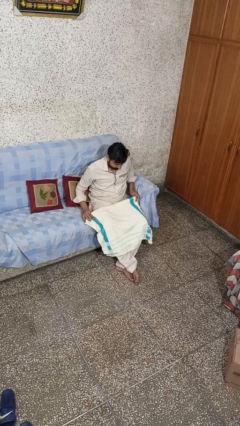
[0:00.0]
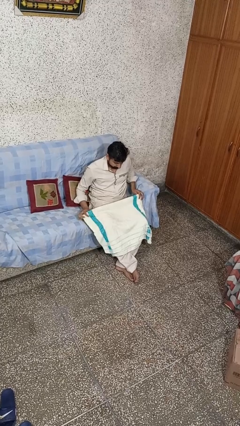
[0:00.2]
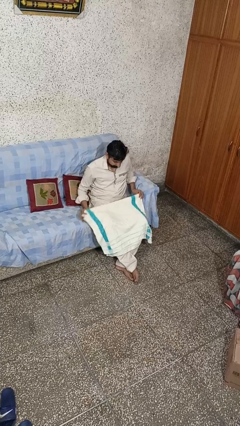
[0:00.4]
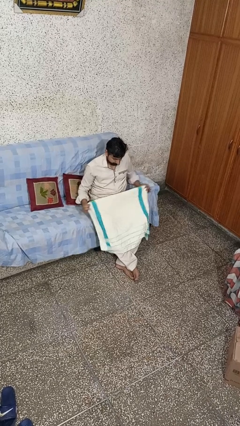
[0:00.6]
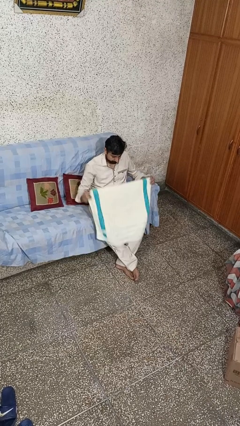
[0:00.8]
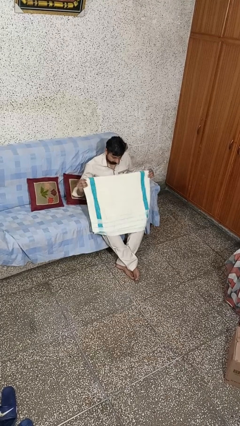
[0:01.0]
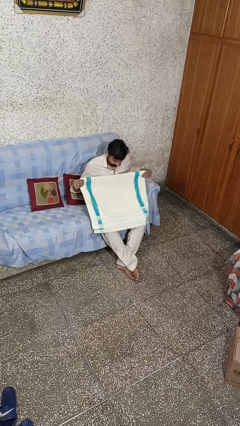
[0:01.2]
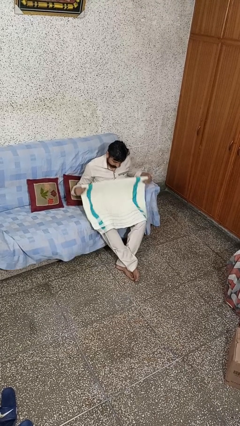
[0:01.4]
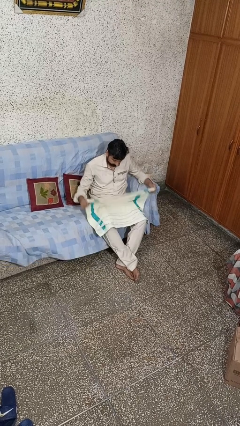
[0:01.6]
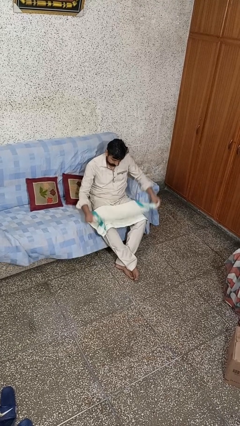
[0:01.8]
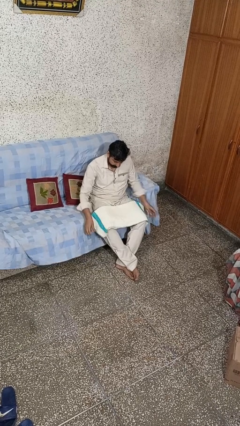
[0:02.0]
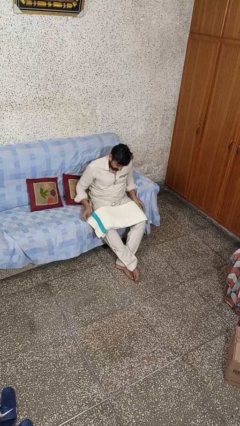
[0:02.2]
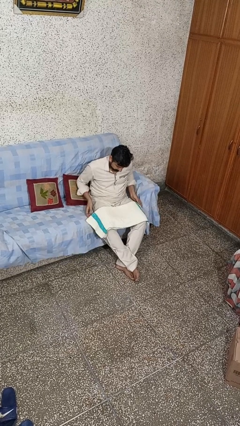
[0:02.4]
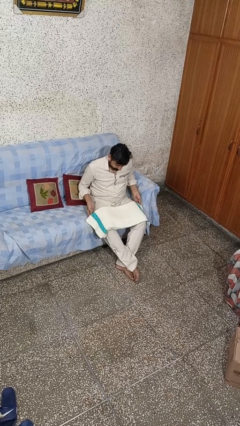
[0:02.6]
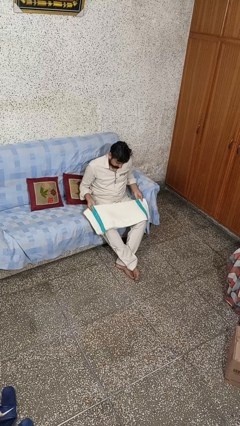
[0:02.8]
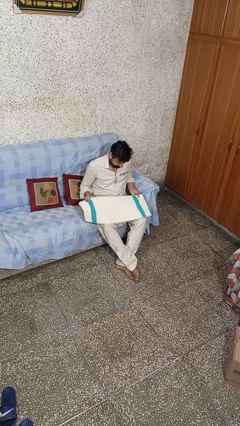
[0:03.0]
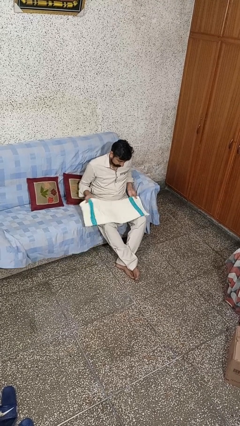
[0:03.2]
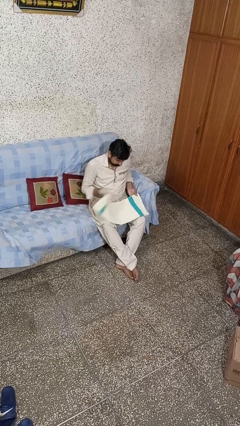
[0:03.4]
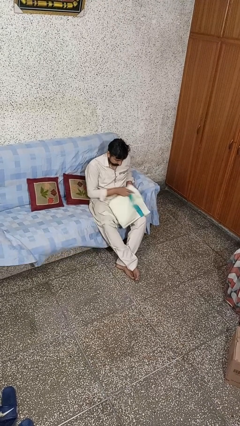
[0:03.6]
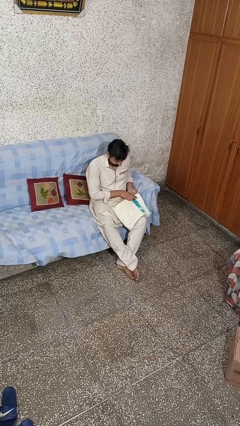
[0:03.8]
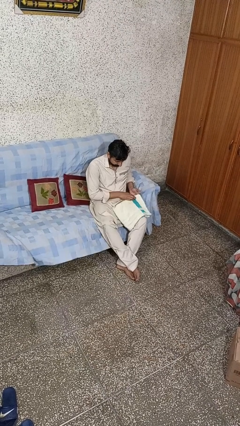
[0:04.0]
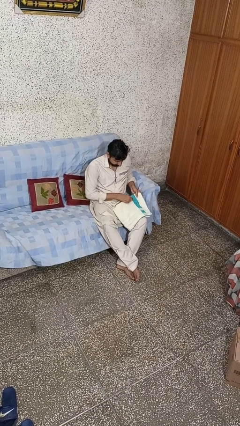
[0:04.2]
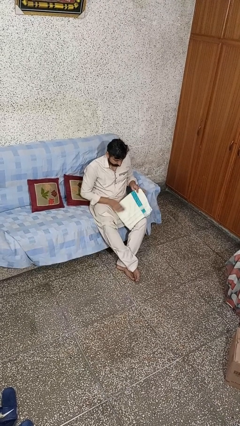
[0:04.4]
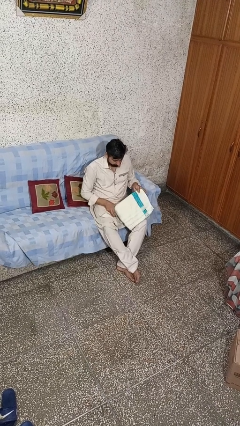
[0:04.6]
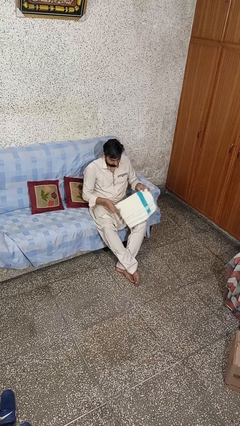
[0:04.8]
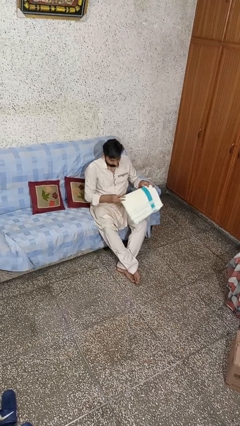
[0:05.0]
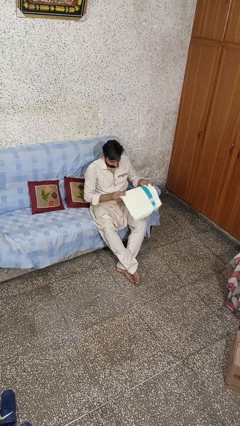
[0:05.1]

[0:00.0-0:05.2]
person folds towel

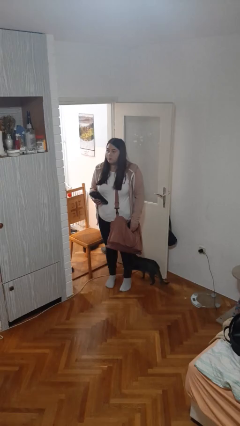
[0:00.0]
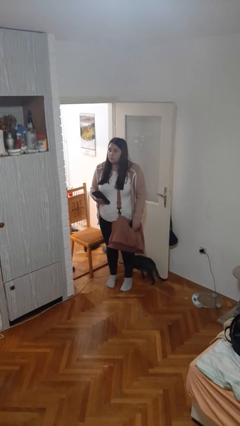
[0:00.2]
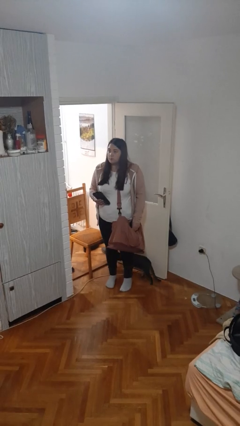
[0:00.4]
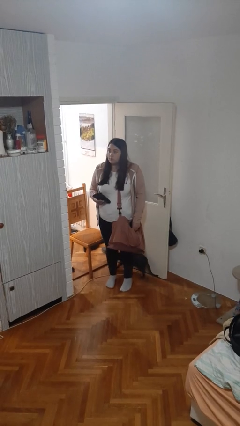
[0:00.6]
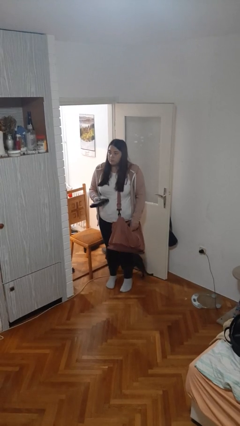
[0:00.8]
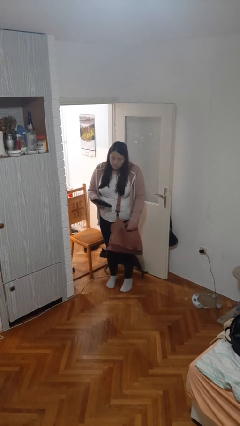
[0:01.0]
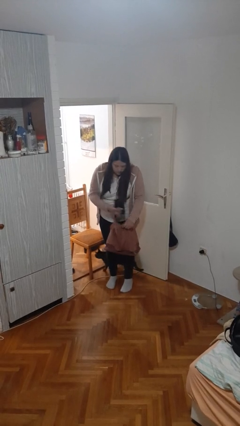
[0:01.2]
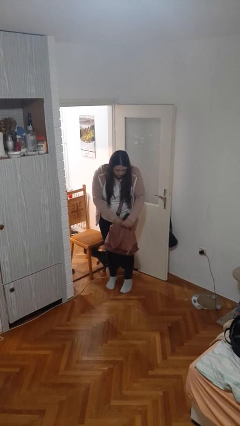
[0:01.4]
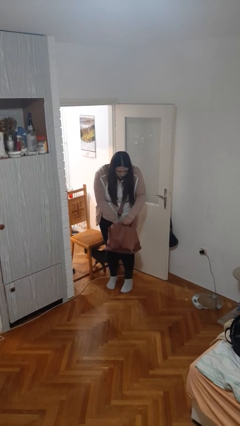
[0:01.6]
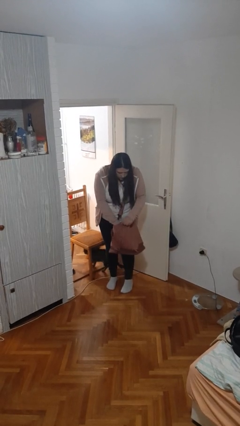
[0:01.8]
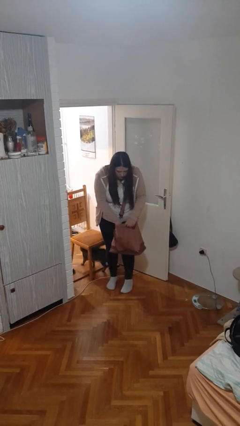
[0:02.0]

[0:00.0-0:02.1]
person puts object into purse

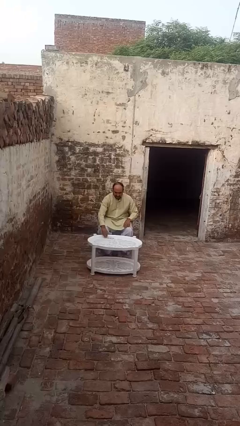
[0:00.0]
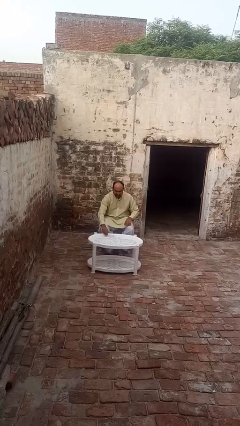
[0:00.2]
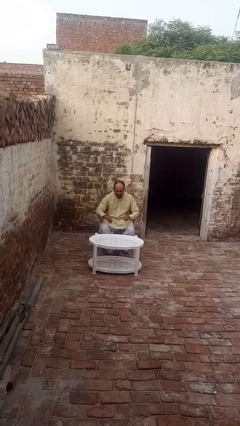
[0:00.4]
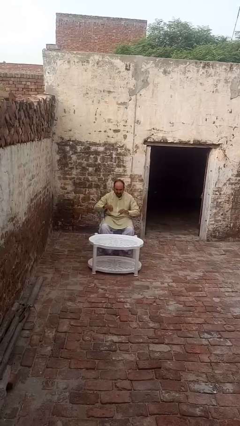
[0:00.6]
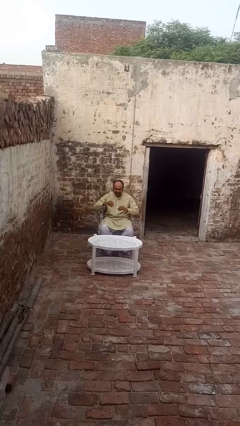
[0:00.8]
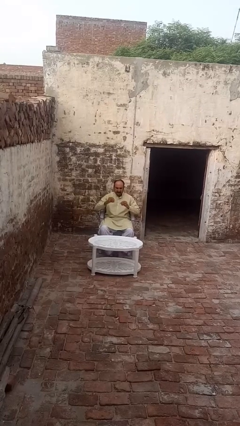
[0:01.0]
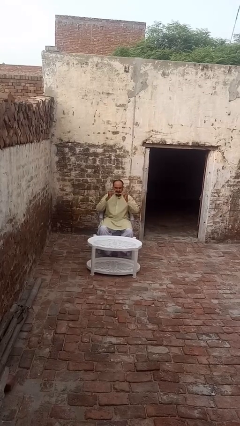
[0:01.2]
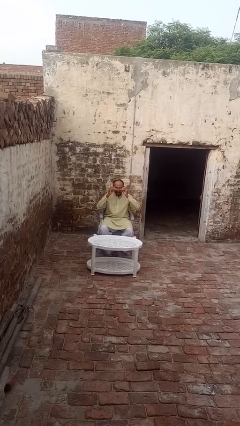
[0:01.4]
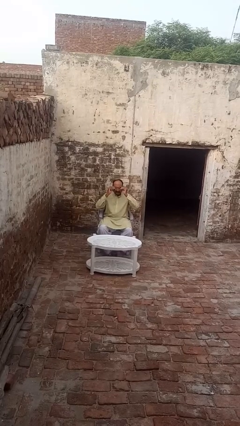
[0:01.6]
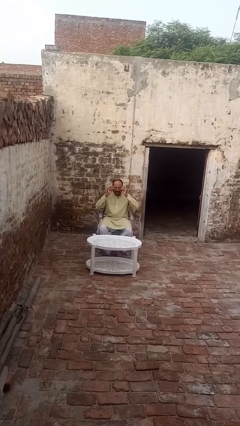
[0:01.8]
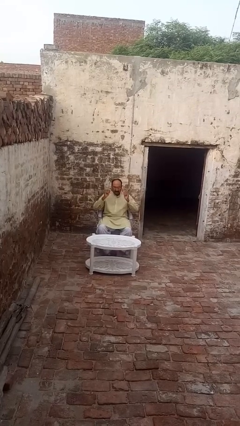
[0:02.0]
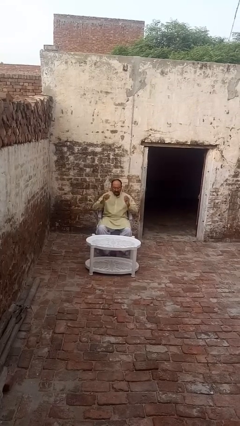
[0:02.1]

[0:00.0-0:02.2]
person puts on glasses

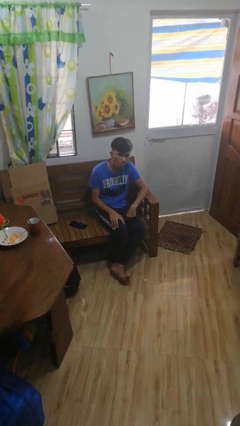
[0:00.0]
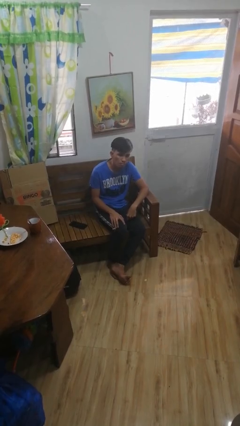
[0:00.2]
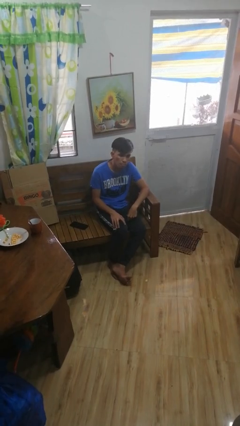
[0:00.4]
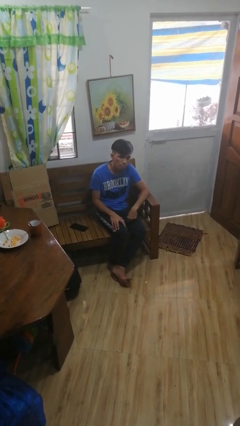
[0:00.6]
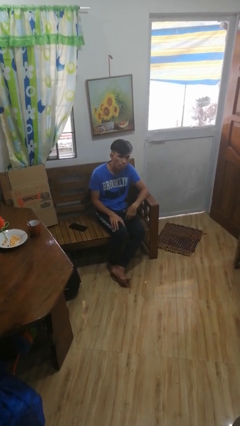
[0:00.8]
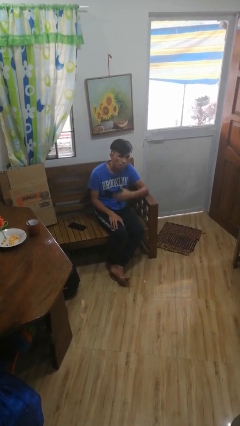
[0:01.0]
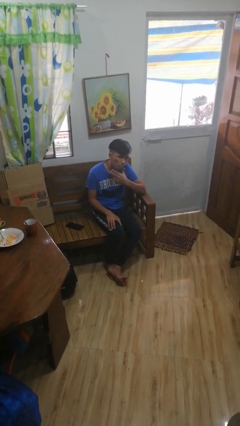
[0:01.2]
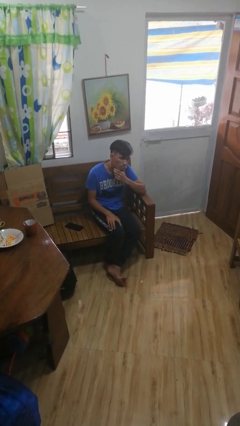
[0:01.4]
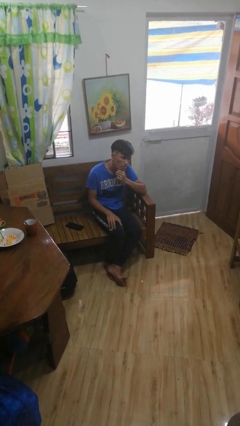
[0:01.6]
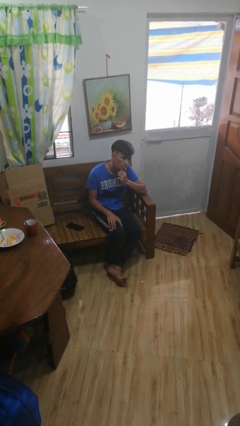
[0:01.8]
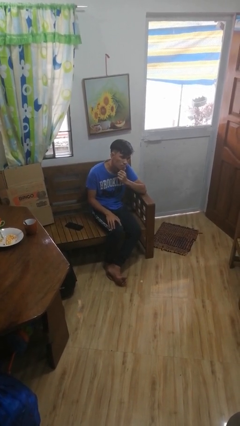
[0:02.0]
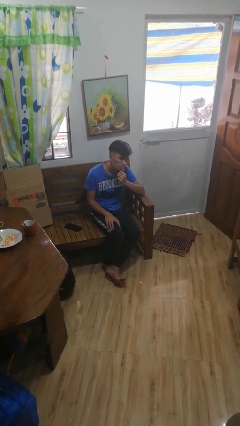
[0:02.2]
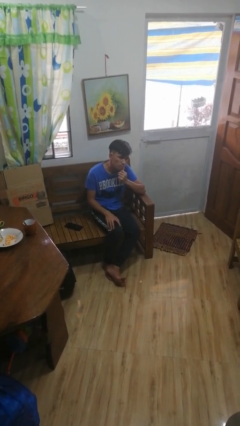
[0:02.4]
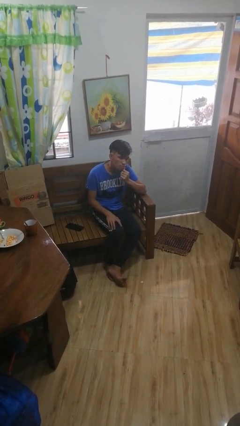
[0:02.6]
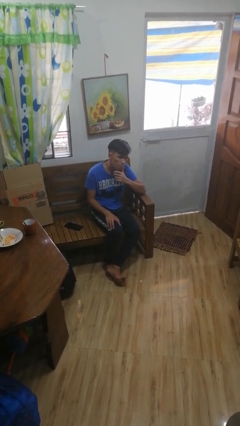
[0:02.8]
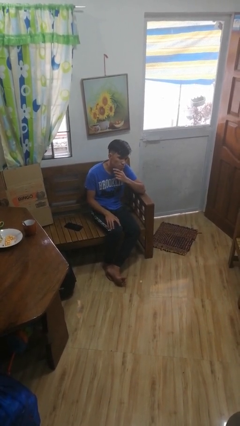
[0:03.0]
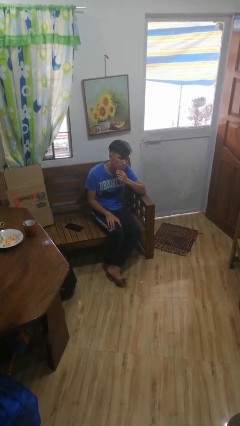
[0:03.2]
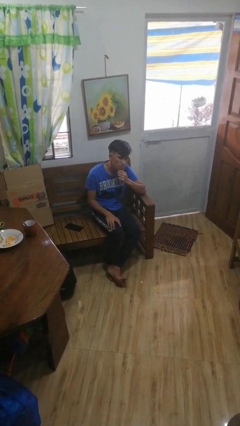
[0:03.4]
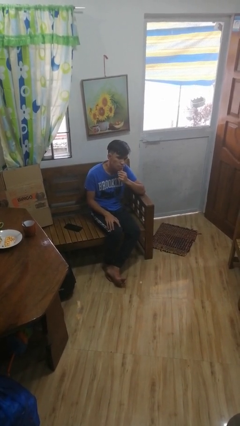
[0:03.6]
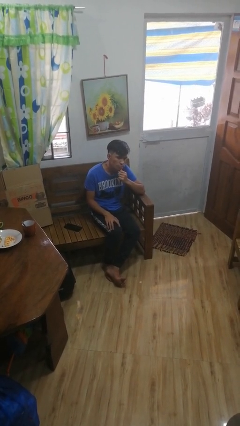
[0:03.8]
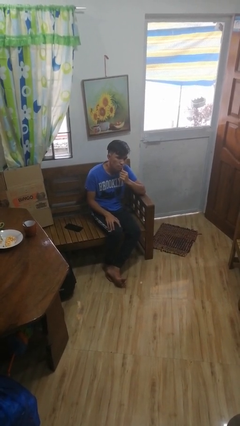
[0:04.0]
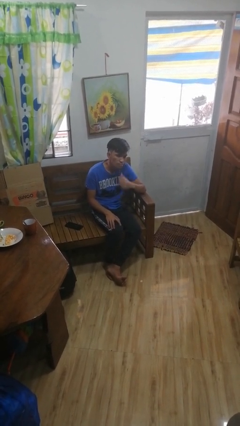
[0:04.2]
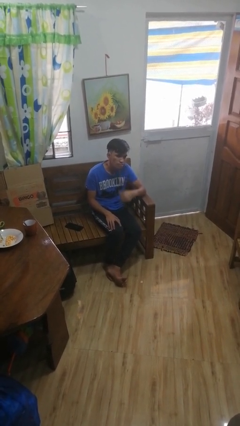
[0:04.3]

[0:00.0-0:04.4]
person strokes chin

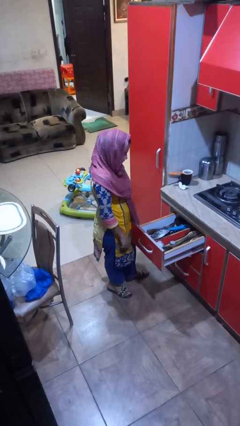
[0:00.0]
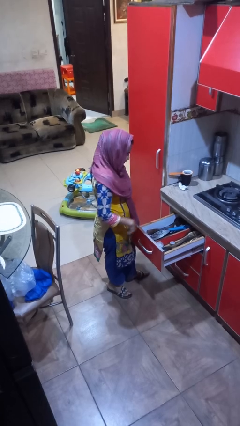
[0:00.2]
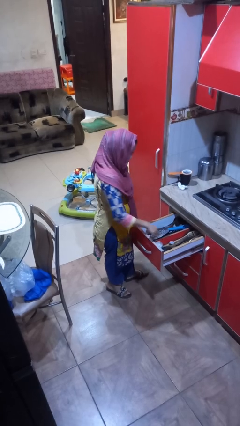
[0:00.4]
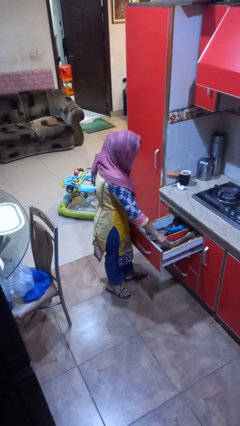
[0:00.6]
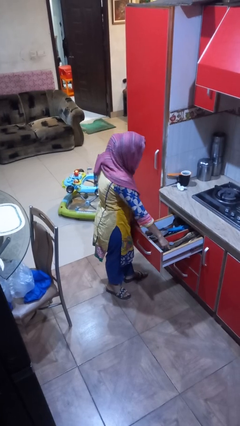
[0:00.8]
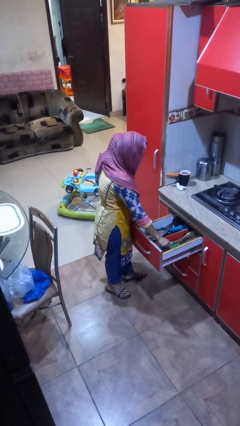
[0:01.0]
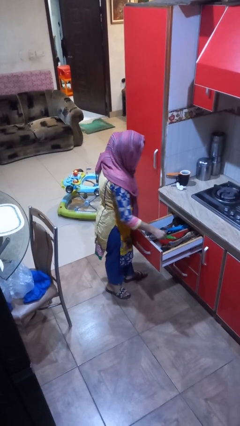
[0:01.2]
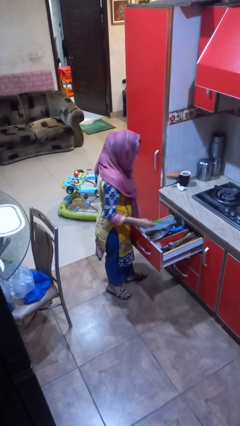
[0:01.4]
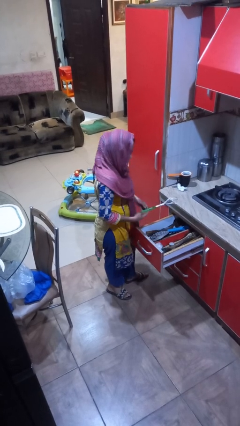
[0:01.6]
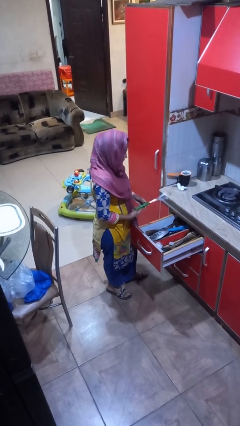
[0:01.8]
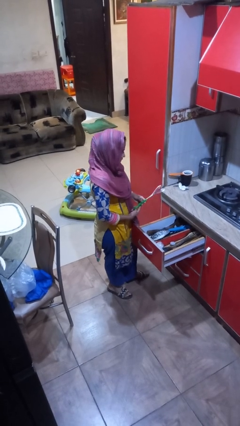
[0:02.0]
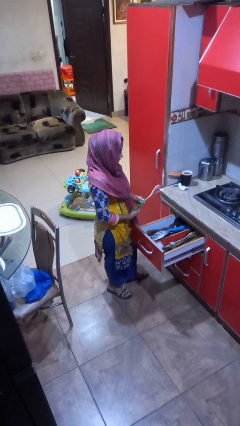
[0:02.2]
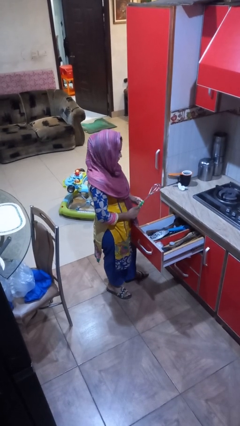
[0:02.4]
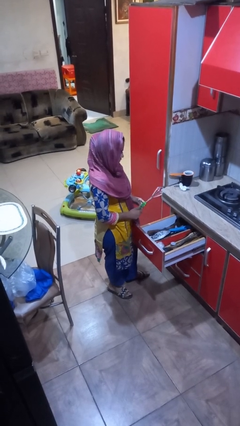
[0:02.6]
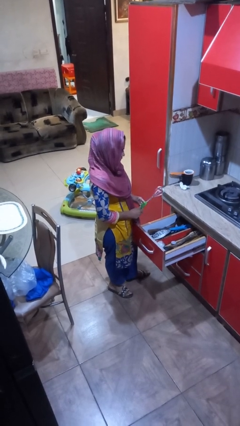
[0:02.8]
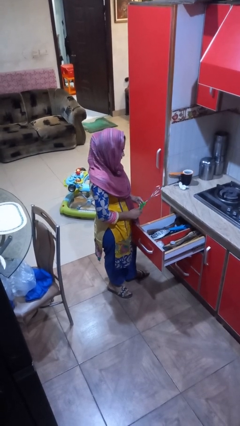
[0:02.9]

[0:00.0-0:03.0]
person takes object from kitchen drawer

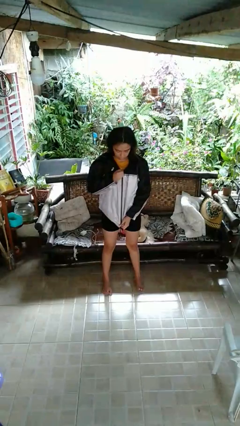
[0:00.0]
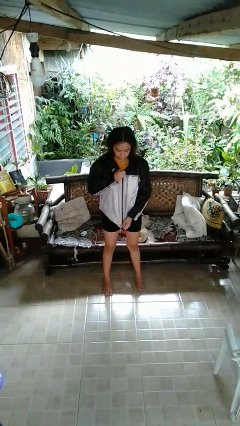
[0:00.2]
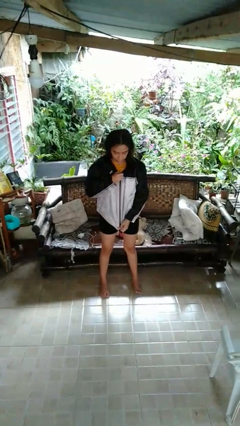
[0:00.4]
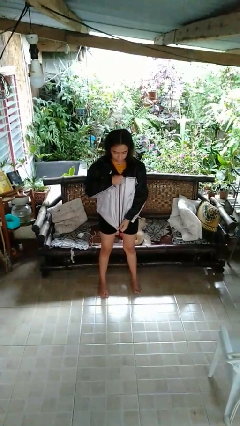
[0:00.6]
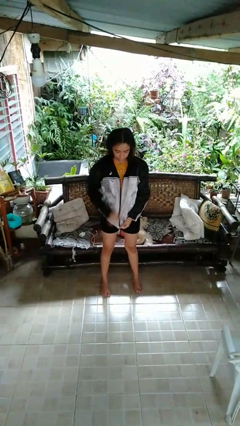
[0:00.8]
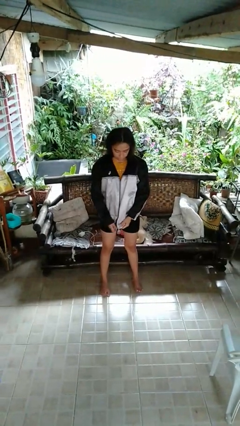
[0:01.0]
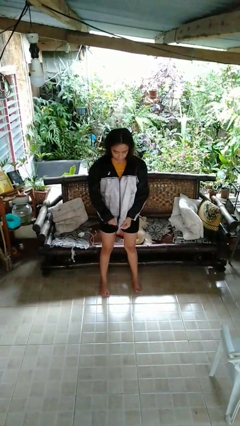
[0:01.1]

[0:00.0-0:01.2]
person unzips jacket
